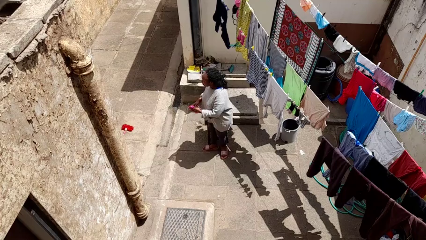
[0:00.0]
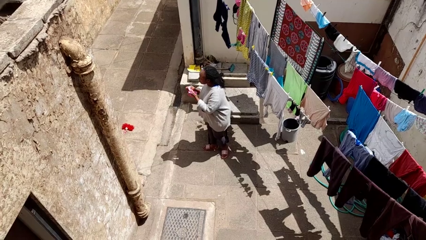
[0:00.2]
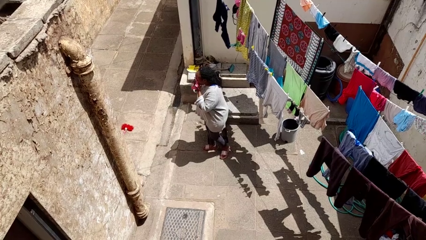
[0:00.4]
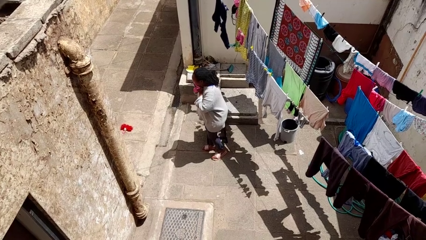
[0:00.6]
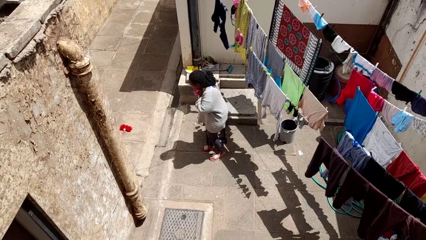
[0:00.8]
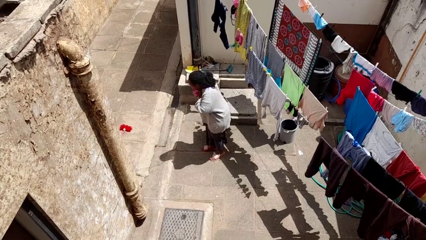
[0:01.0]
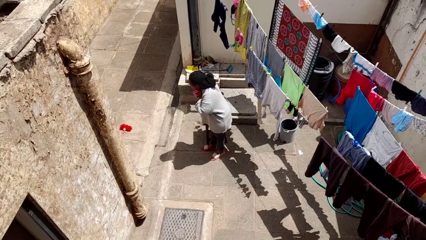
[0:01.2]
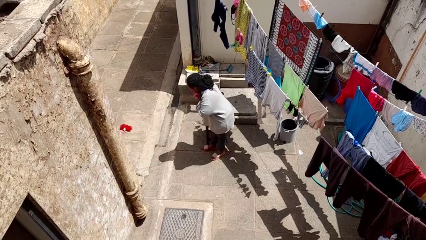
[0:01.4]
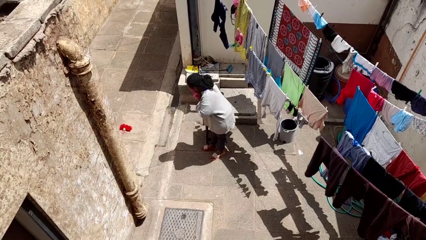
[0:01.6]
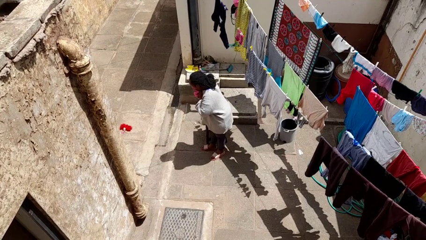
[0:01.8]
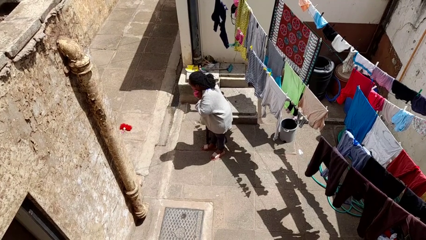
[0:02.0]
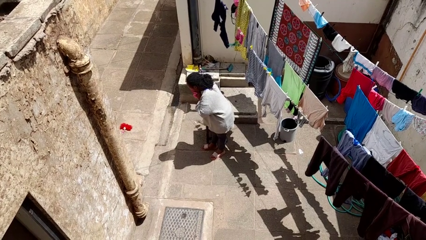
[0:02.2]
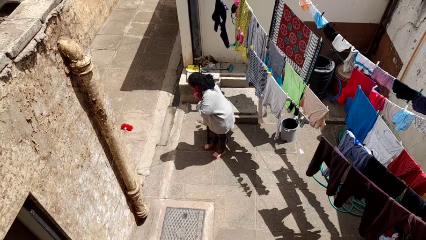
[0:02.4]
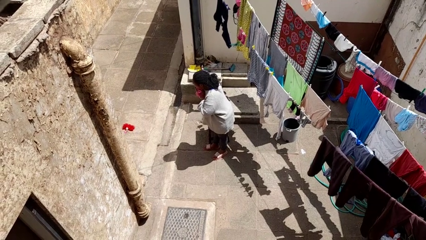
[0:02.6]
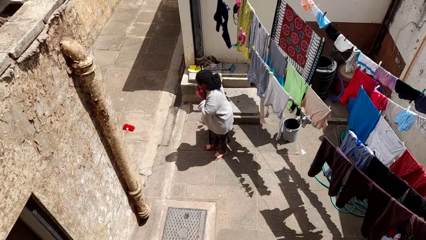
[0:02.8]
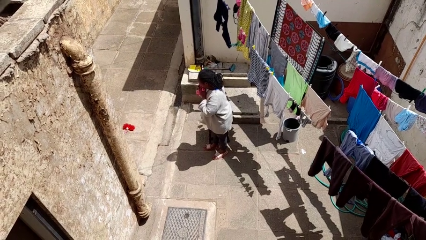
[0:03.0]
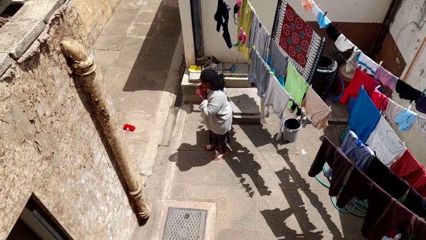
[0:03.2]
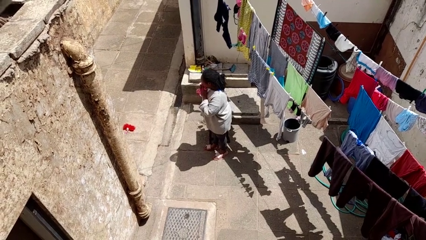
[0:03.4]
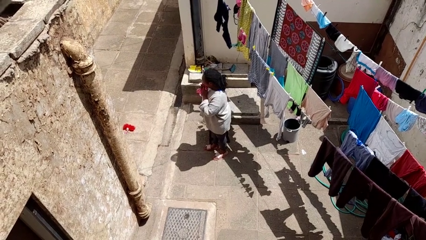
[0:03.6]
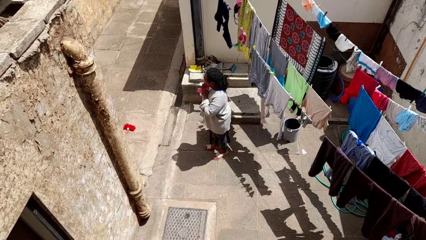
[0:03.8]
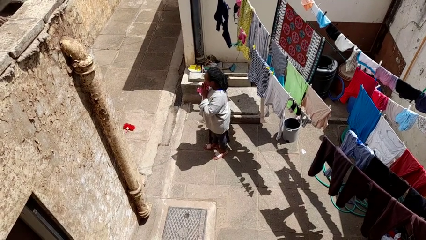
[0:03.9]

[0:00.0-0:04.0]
person blows nose

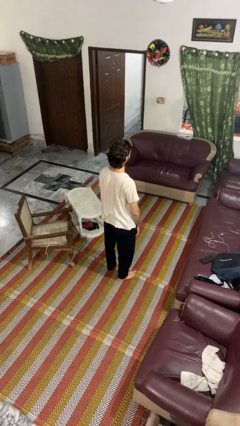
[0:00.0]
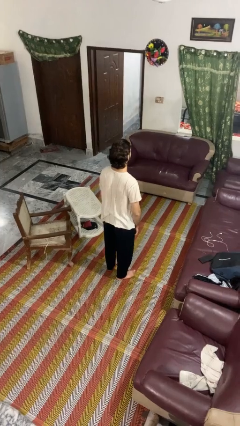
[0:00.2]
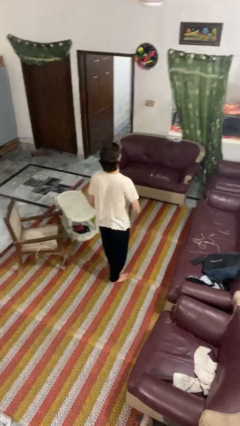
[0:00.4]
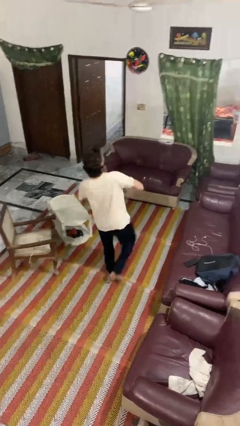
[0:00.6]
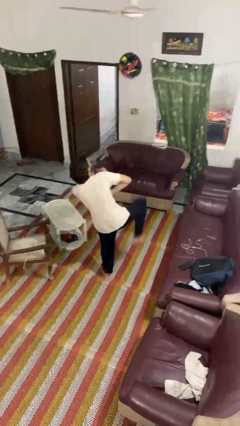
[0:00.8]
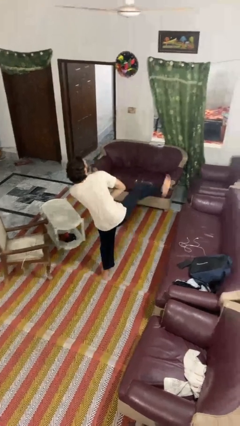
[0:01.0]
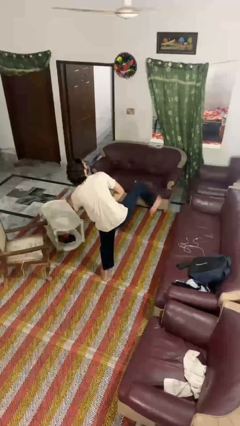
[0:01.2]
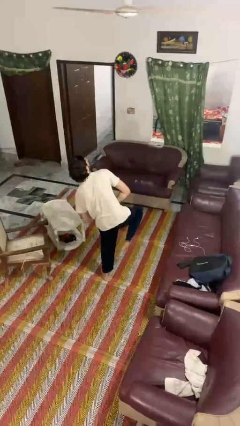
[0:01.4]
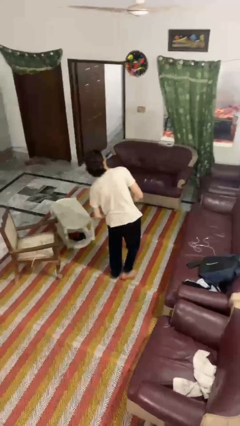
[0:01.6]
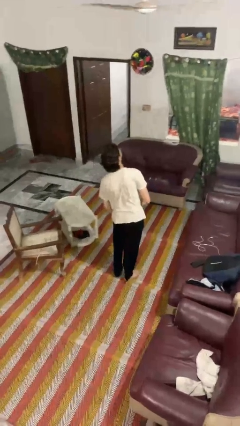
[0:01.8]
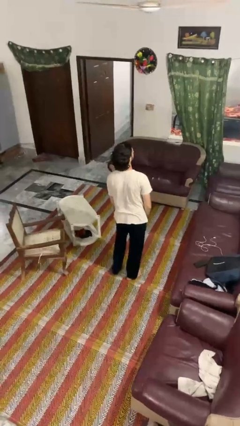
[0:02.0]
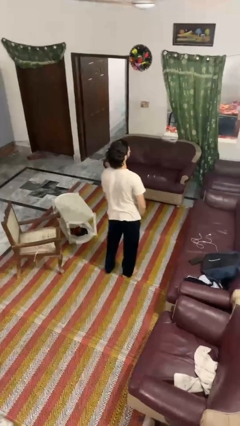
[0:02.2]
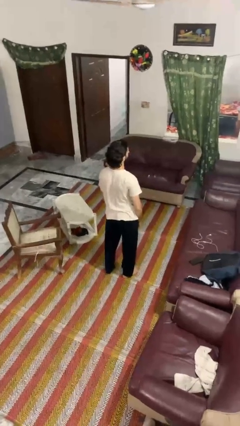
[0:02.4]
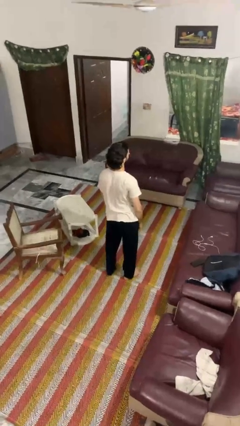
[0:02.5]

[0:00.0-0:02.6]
person karate kicks

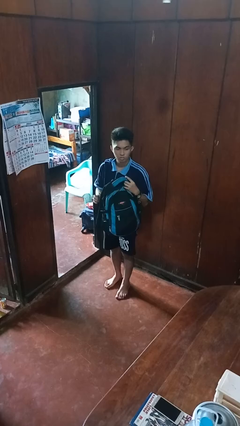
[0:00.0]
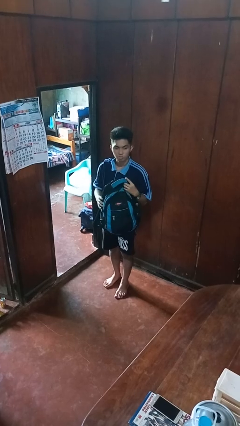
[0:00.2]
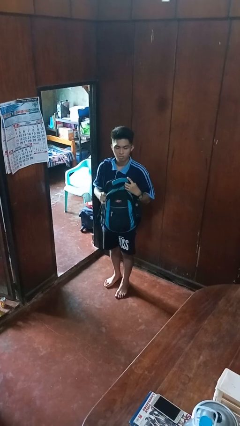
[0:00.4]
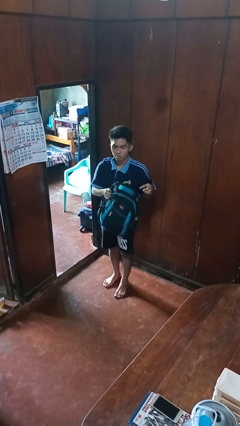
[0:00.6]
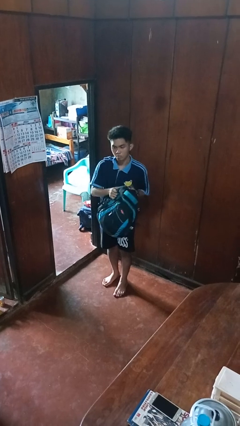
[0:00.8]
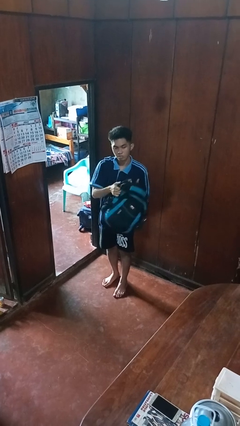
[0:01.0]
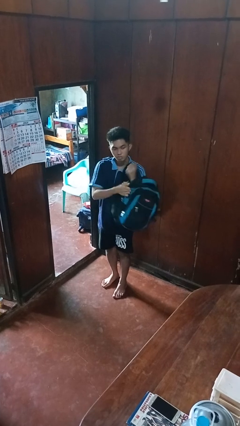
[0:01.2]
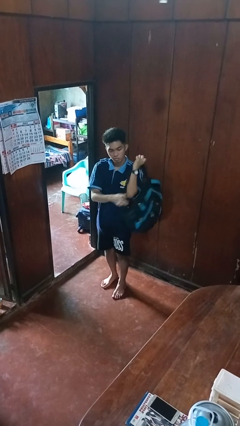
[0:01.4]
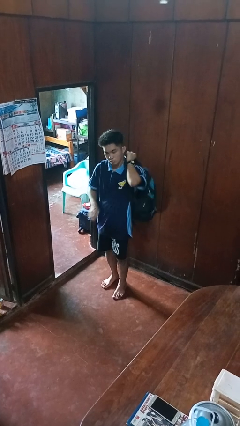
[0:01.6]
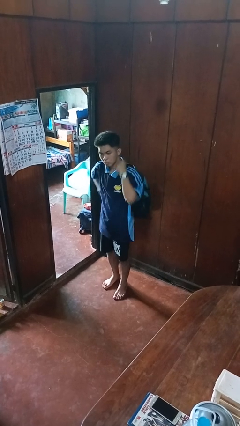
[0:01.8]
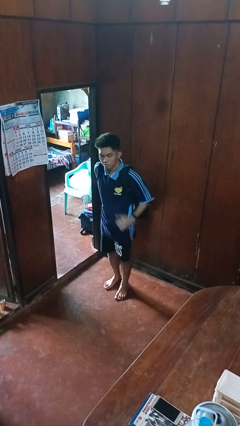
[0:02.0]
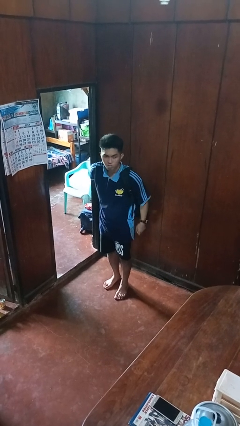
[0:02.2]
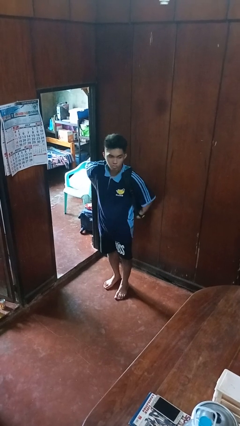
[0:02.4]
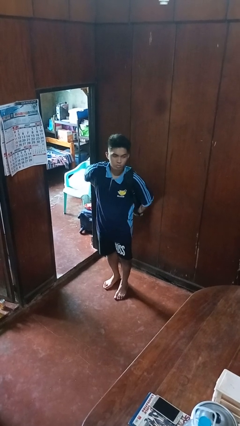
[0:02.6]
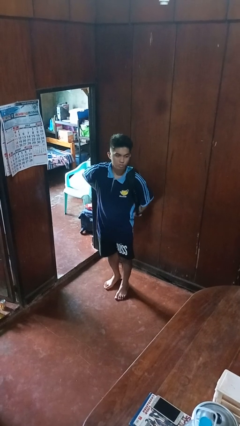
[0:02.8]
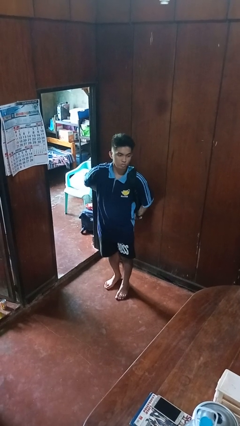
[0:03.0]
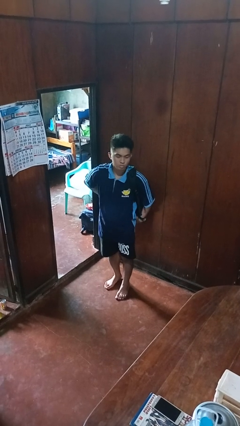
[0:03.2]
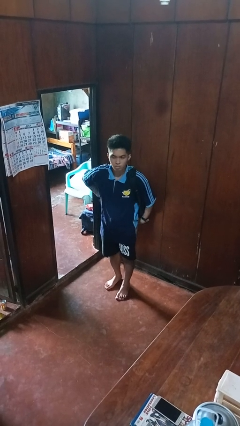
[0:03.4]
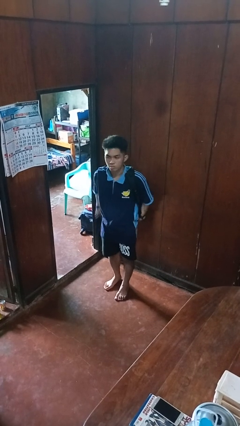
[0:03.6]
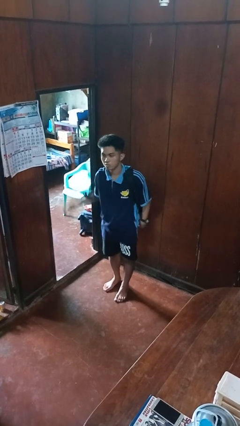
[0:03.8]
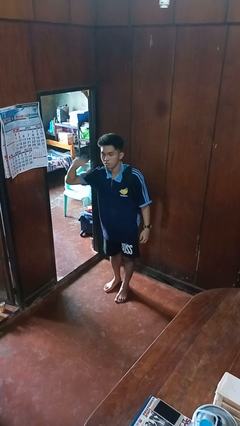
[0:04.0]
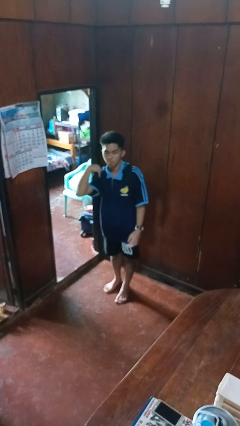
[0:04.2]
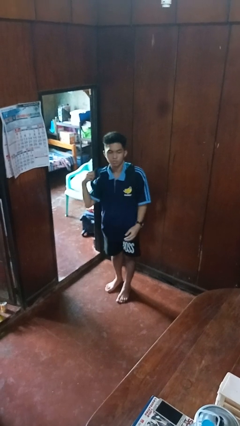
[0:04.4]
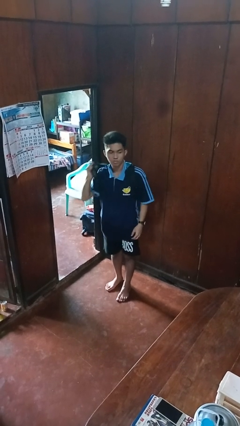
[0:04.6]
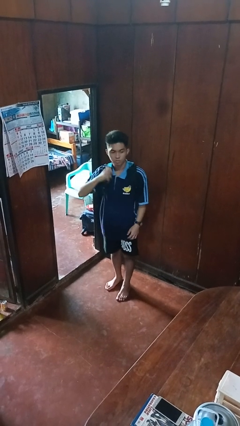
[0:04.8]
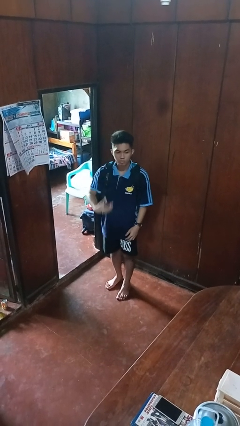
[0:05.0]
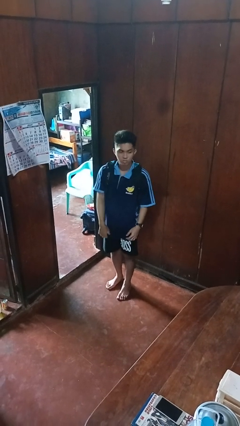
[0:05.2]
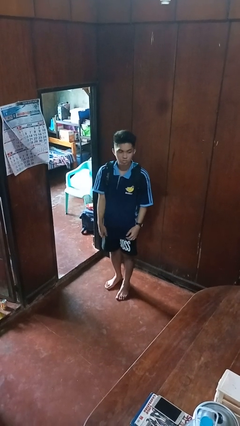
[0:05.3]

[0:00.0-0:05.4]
person puts on backpack

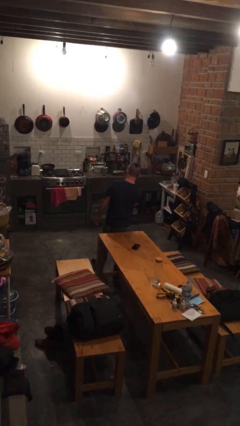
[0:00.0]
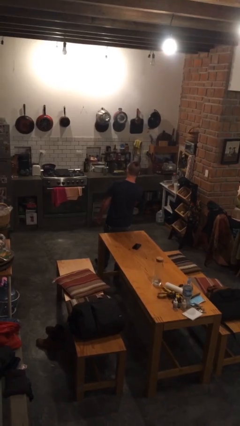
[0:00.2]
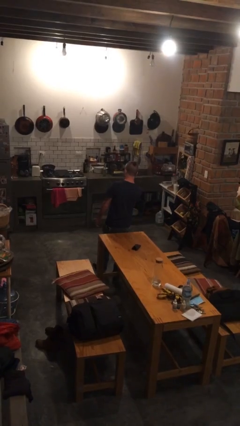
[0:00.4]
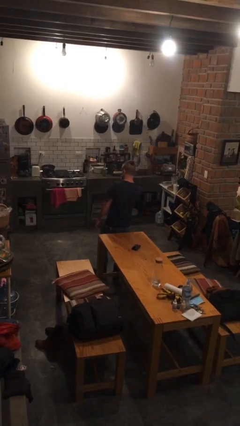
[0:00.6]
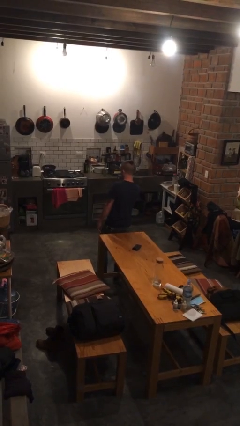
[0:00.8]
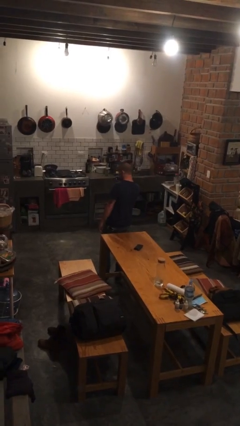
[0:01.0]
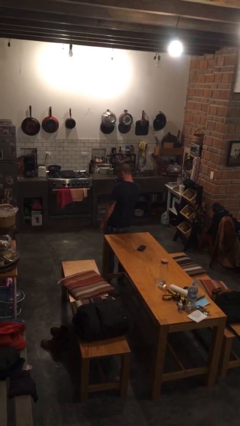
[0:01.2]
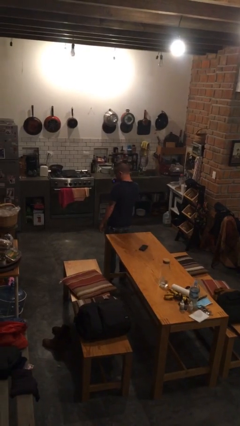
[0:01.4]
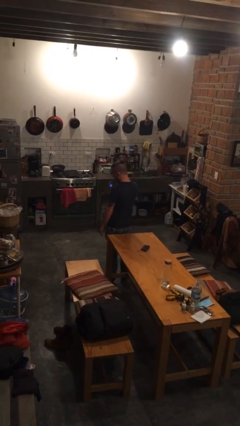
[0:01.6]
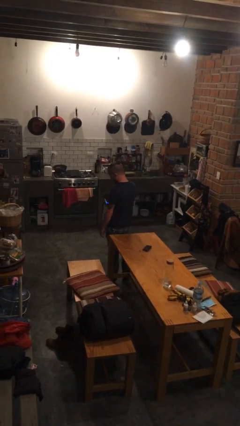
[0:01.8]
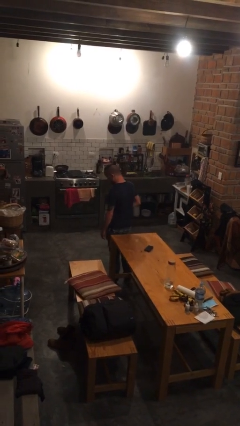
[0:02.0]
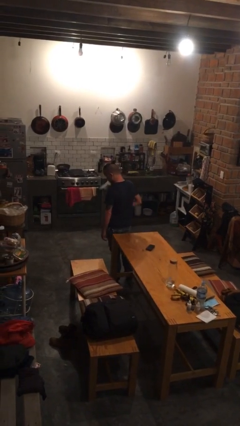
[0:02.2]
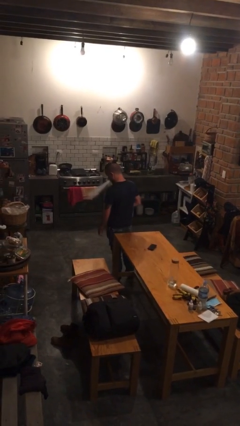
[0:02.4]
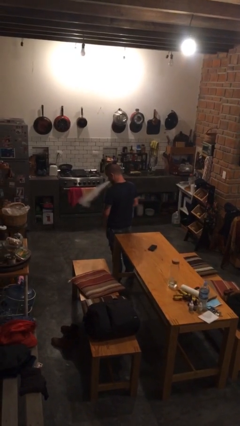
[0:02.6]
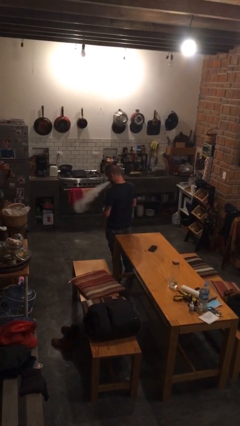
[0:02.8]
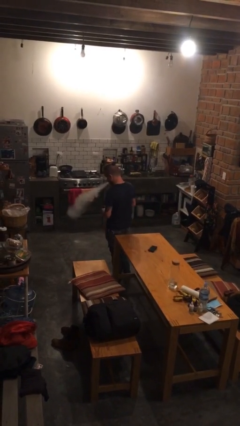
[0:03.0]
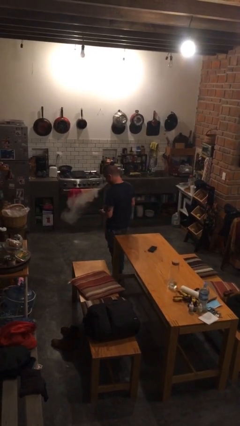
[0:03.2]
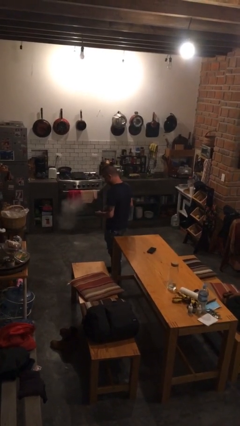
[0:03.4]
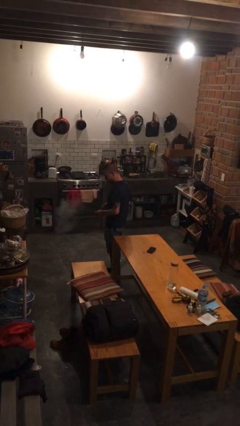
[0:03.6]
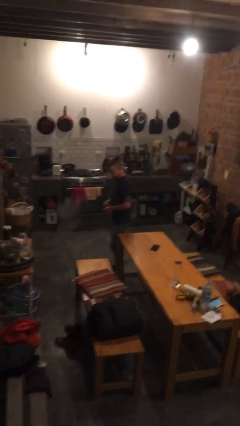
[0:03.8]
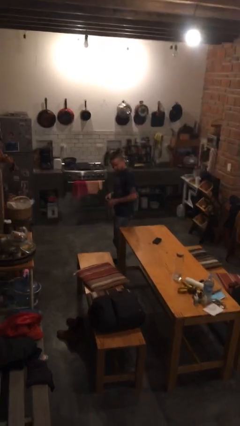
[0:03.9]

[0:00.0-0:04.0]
person vapes

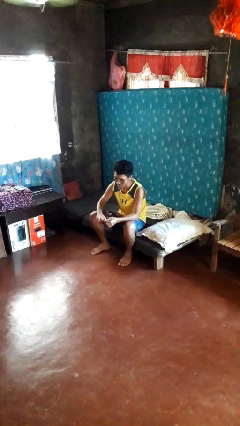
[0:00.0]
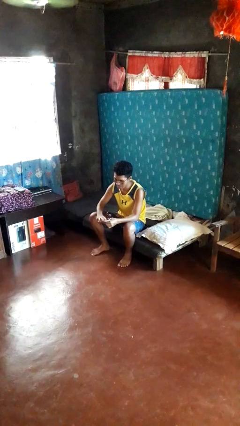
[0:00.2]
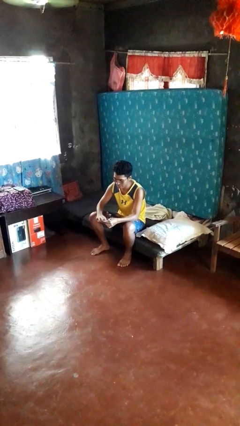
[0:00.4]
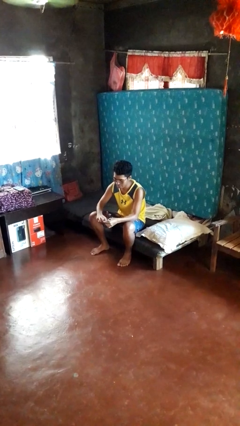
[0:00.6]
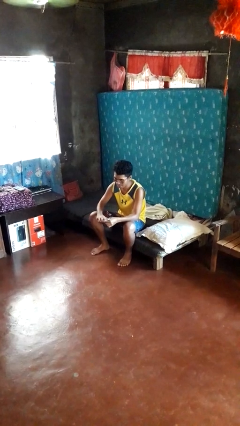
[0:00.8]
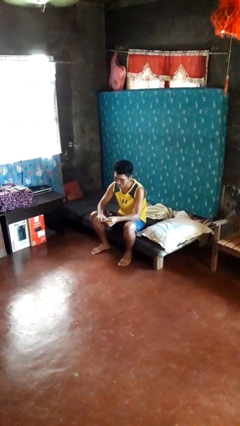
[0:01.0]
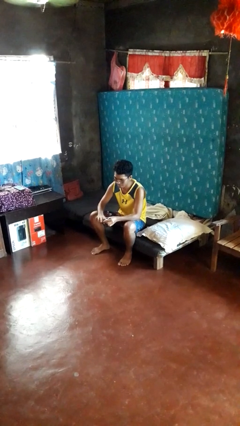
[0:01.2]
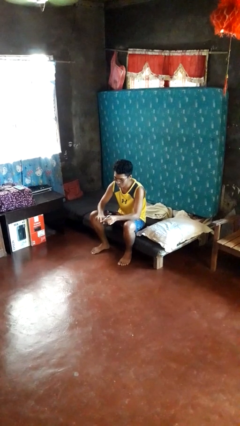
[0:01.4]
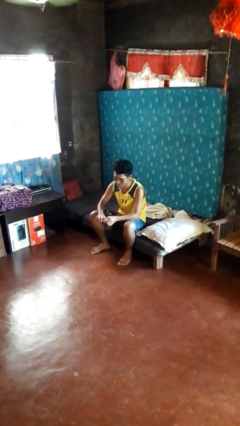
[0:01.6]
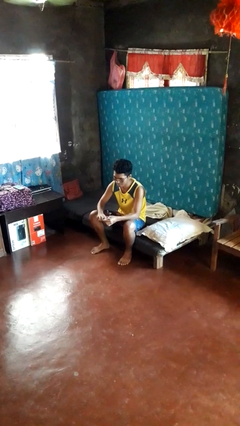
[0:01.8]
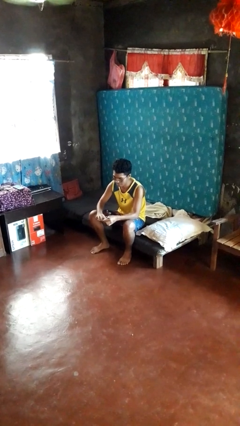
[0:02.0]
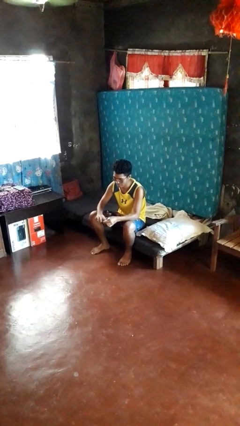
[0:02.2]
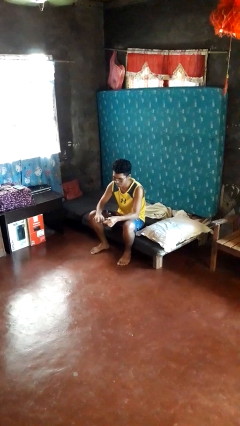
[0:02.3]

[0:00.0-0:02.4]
person files fingernails
